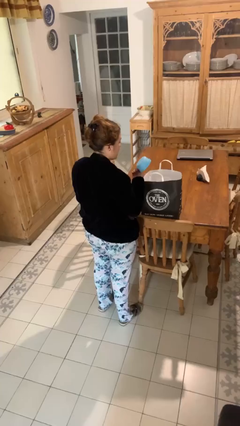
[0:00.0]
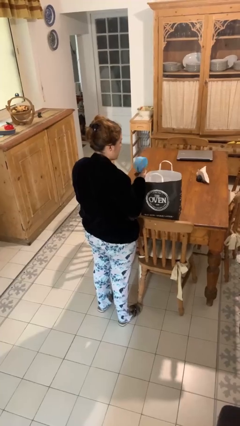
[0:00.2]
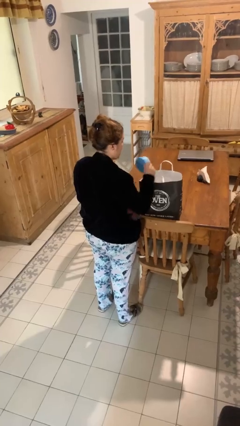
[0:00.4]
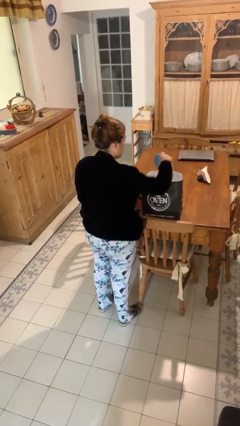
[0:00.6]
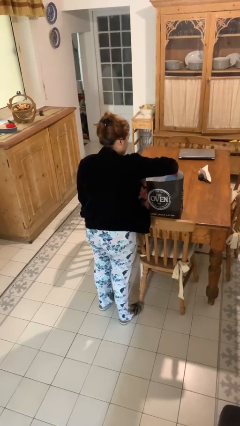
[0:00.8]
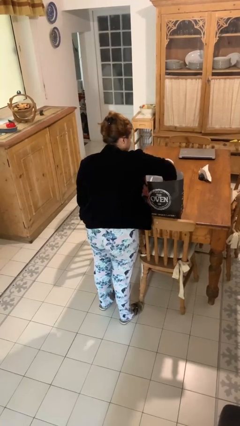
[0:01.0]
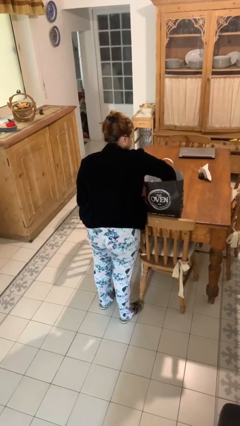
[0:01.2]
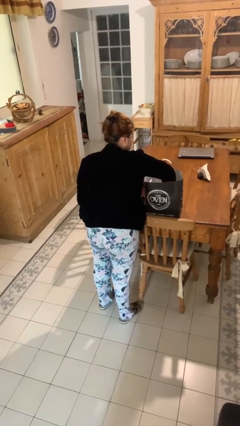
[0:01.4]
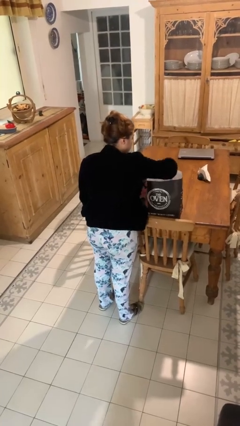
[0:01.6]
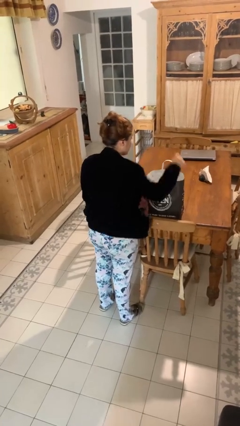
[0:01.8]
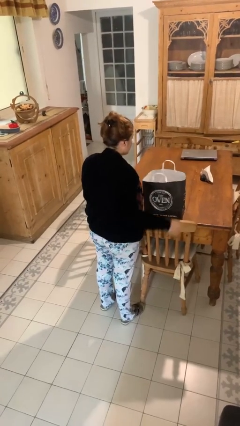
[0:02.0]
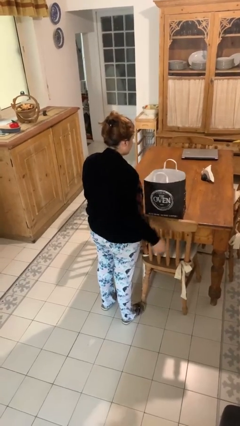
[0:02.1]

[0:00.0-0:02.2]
person puts object into bag

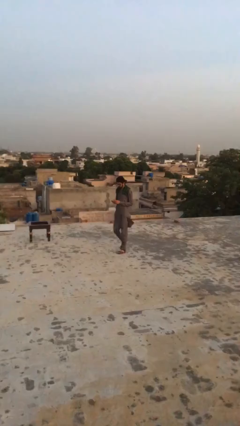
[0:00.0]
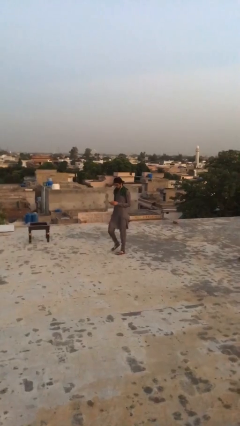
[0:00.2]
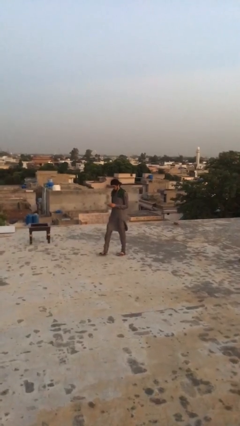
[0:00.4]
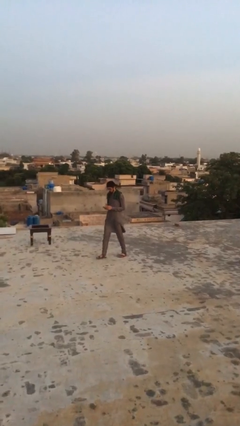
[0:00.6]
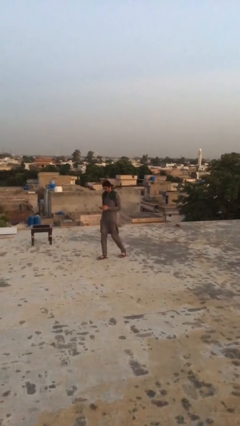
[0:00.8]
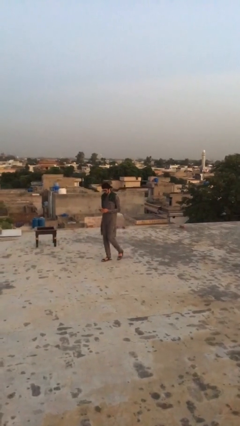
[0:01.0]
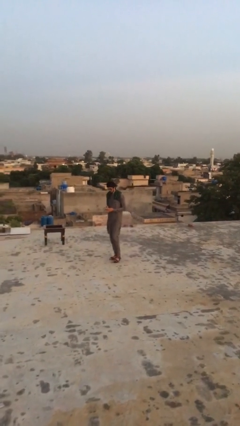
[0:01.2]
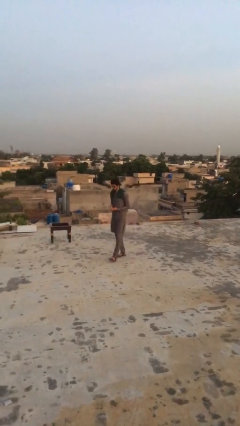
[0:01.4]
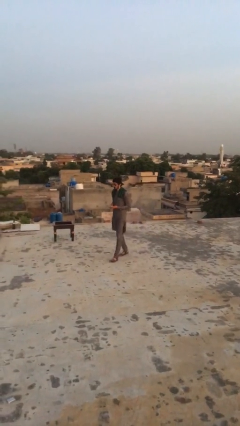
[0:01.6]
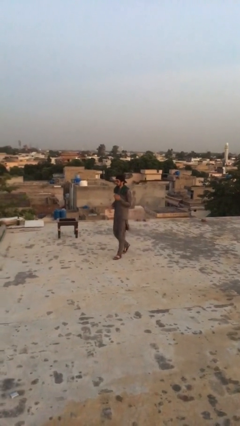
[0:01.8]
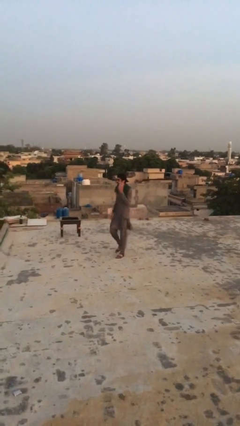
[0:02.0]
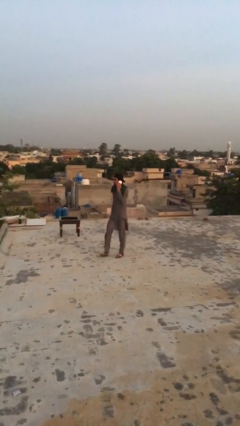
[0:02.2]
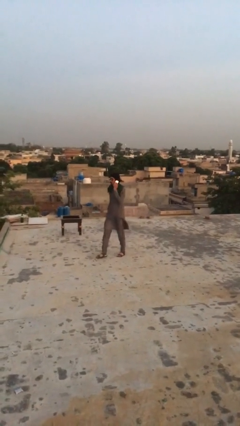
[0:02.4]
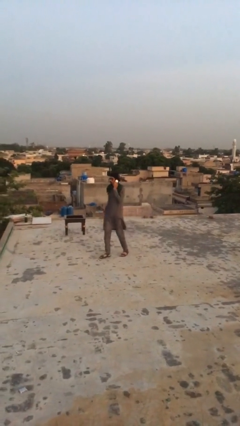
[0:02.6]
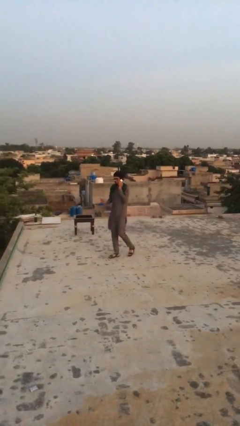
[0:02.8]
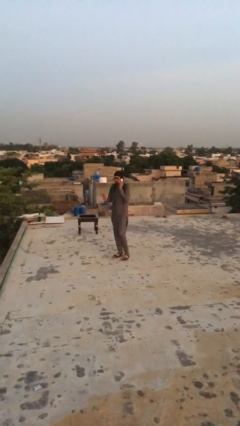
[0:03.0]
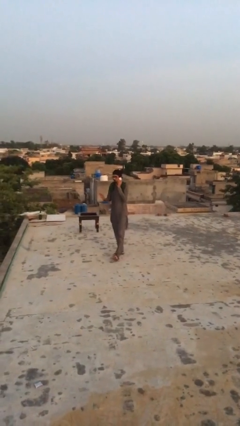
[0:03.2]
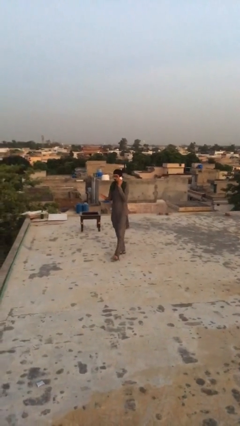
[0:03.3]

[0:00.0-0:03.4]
person talks on phone

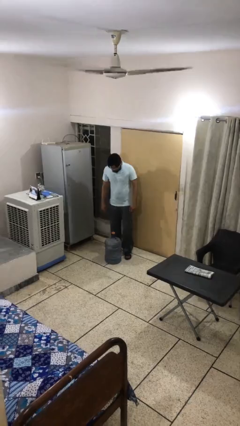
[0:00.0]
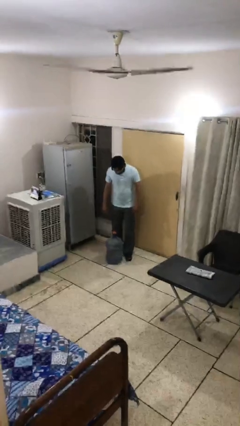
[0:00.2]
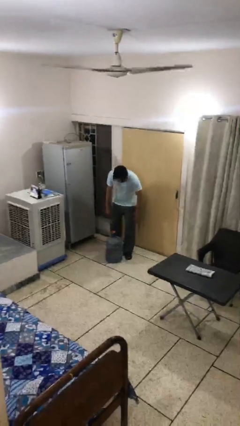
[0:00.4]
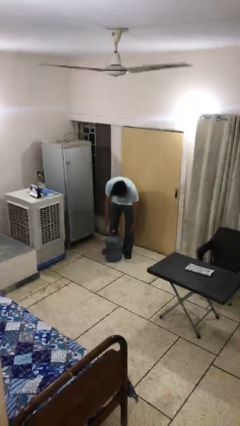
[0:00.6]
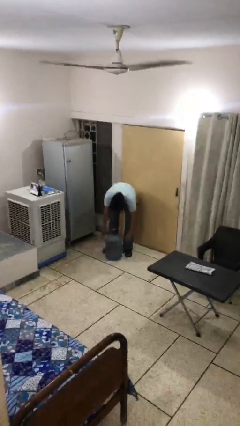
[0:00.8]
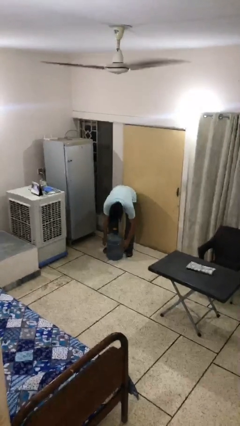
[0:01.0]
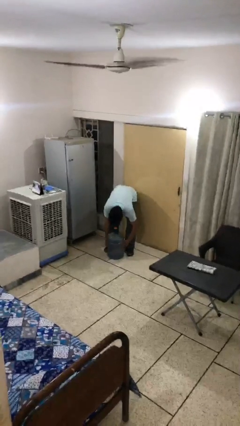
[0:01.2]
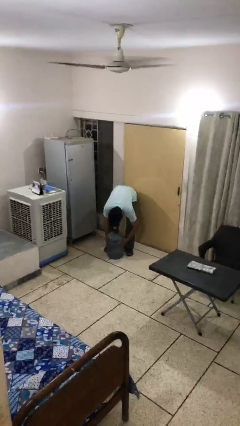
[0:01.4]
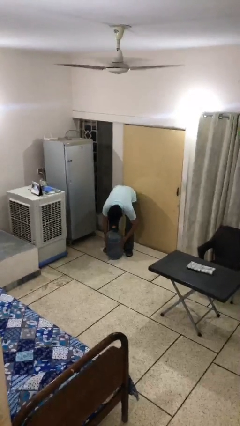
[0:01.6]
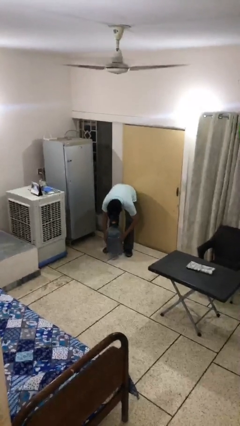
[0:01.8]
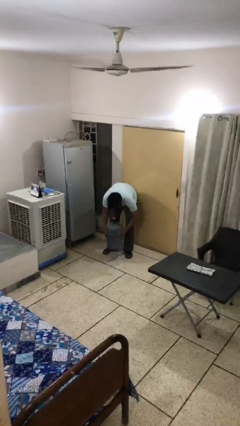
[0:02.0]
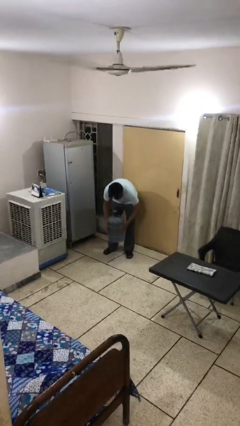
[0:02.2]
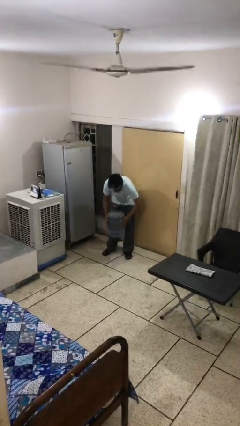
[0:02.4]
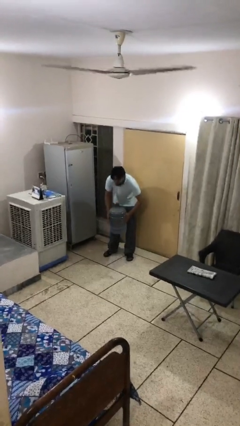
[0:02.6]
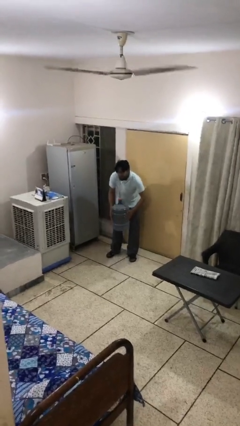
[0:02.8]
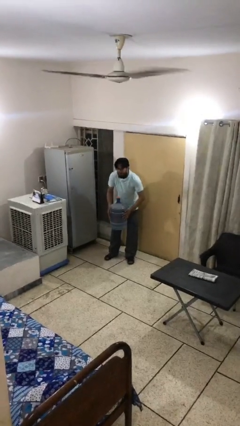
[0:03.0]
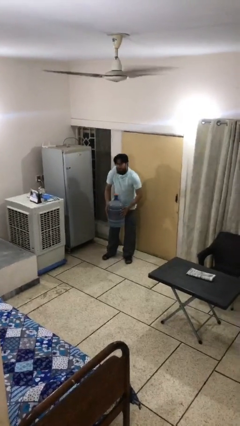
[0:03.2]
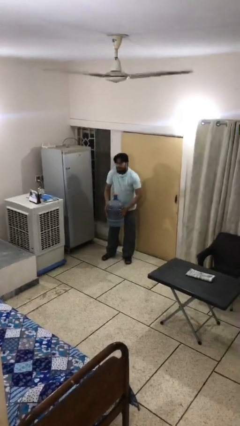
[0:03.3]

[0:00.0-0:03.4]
person picks up object from floor

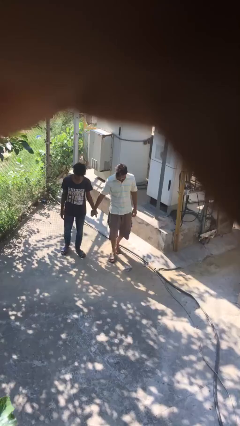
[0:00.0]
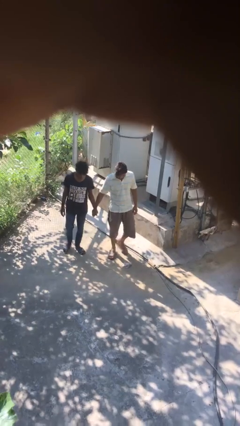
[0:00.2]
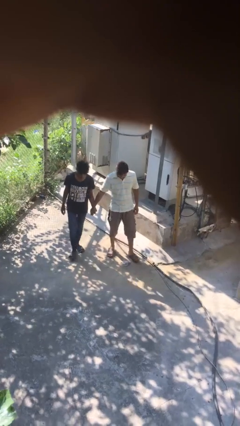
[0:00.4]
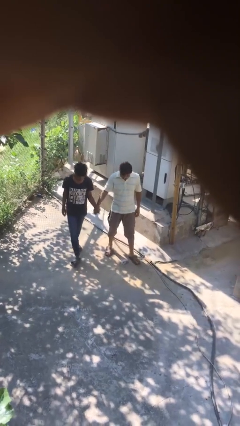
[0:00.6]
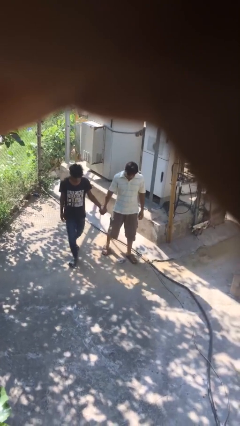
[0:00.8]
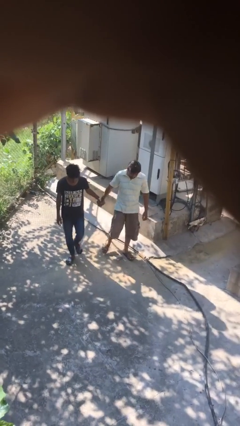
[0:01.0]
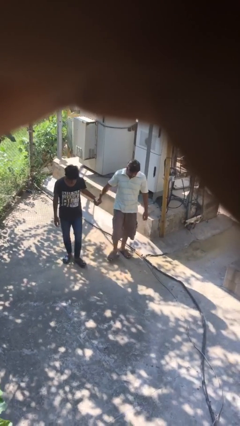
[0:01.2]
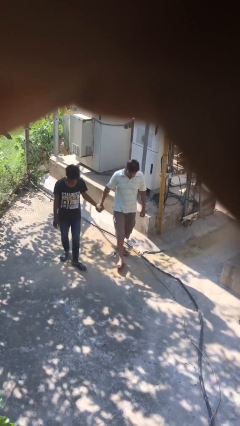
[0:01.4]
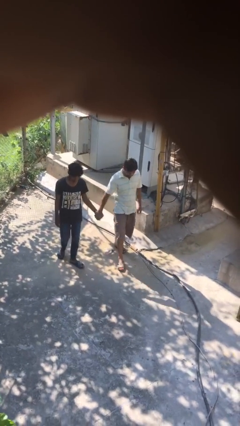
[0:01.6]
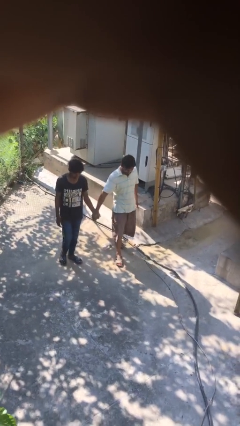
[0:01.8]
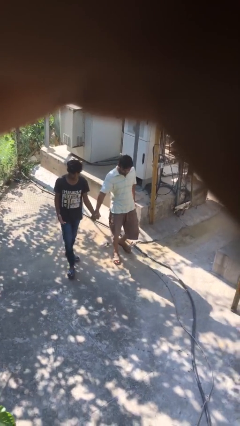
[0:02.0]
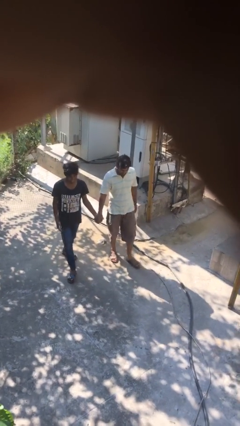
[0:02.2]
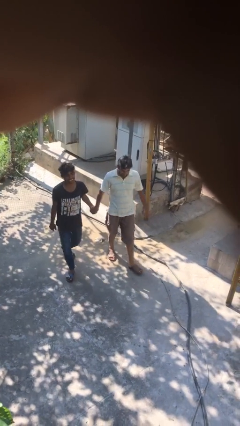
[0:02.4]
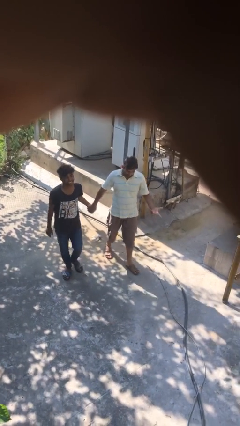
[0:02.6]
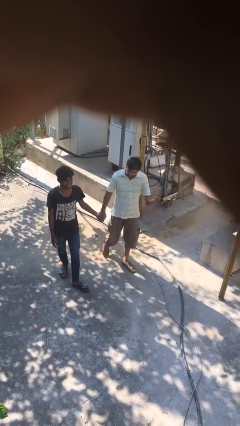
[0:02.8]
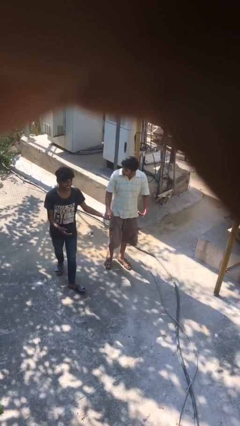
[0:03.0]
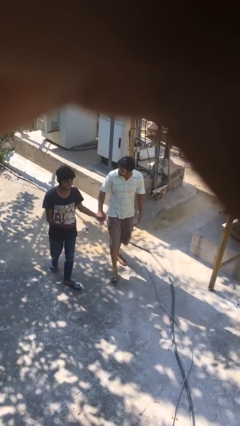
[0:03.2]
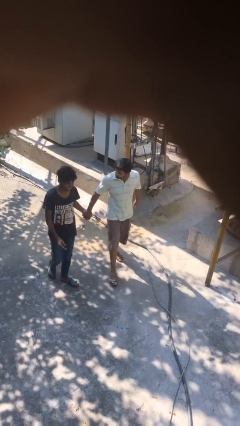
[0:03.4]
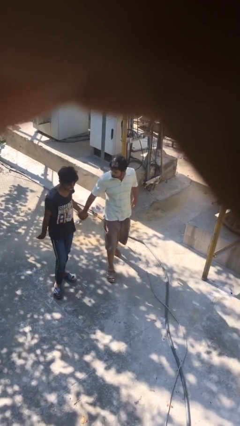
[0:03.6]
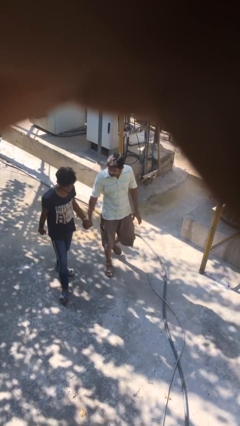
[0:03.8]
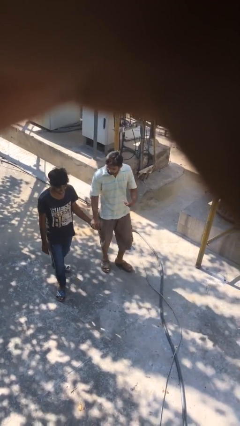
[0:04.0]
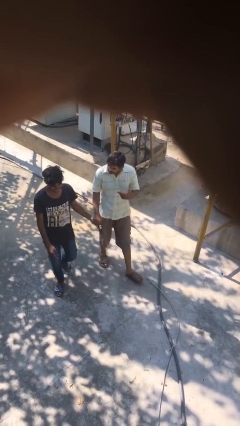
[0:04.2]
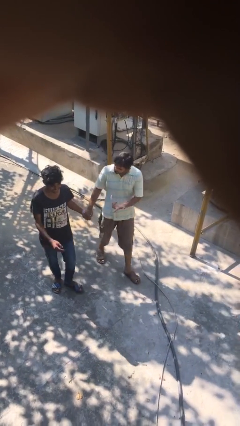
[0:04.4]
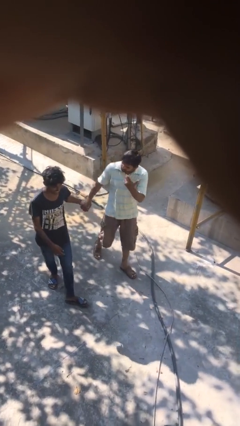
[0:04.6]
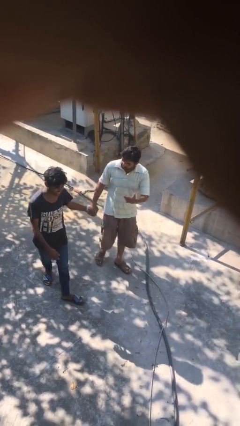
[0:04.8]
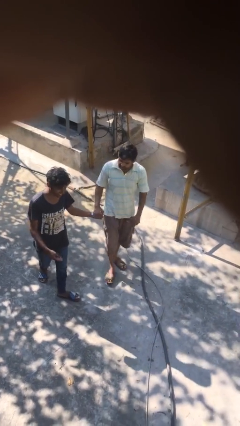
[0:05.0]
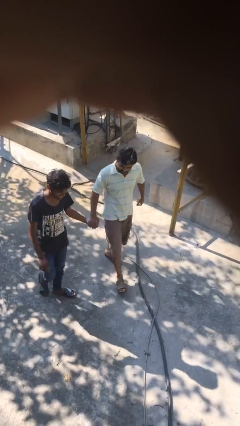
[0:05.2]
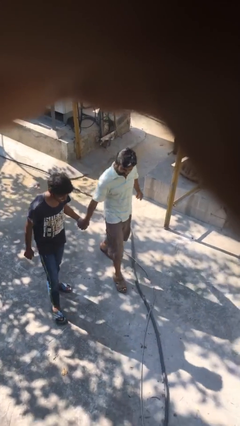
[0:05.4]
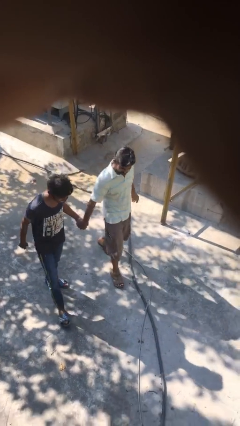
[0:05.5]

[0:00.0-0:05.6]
person holds hand

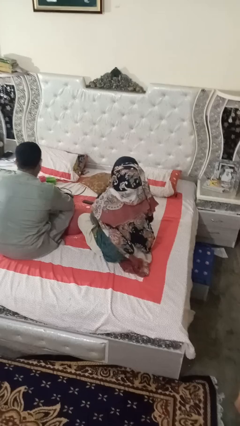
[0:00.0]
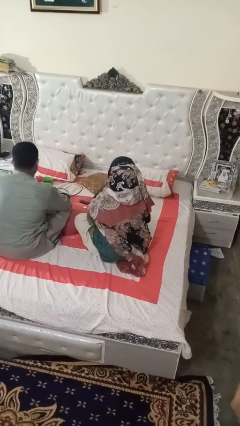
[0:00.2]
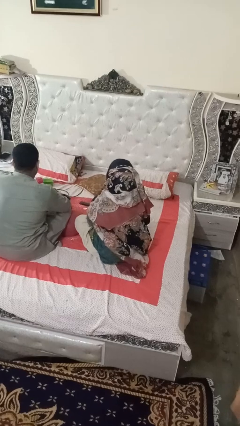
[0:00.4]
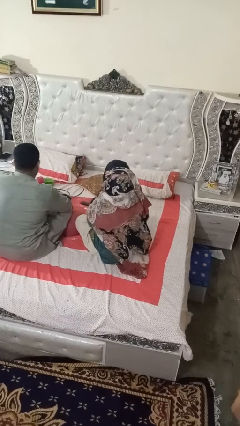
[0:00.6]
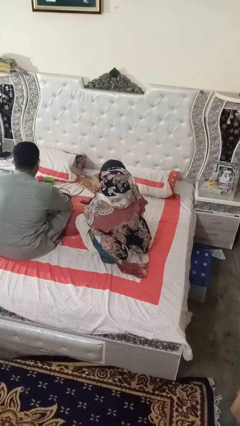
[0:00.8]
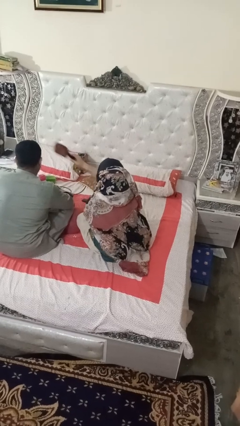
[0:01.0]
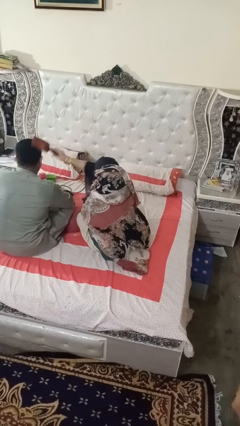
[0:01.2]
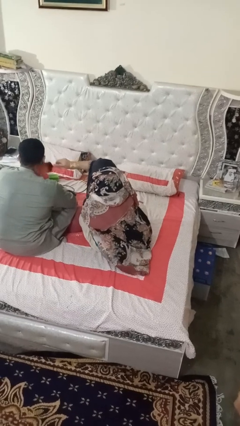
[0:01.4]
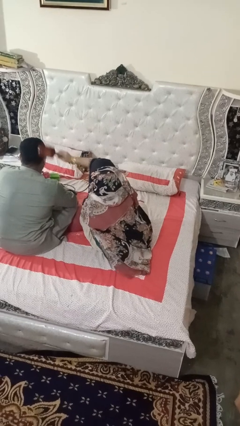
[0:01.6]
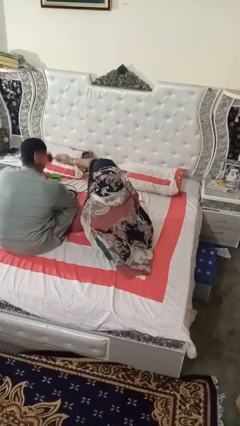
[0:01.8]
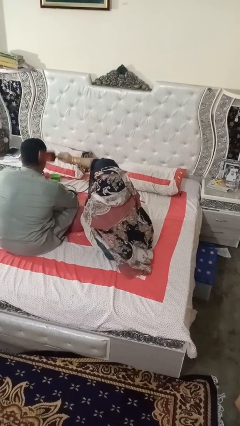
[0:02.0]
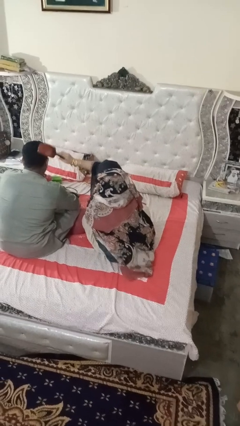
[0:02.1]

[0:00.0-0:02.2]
person brushes hair of person

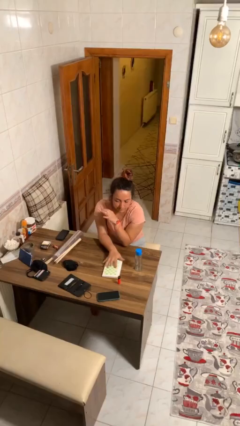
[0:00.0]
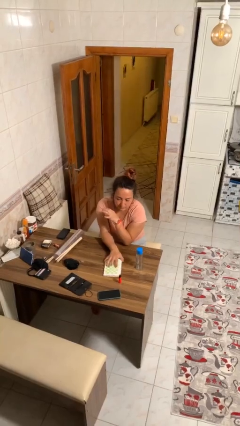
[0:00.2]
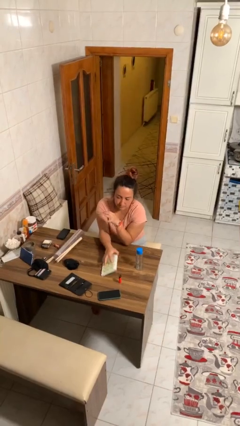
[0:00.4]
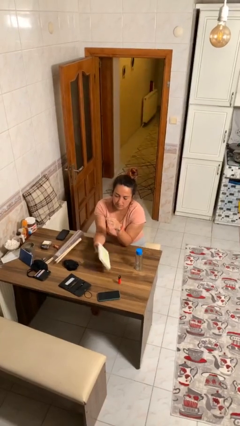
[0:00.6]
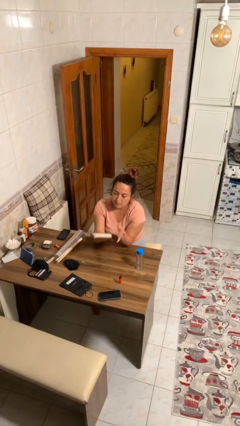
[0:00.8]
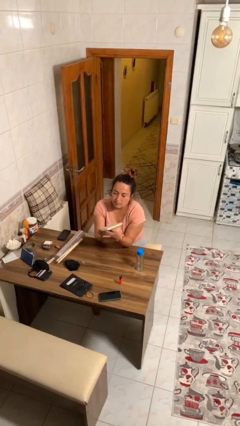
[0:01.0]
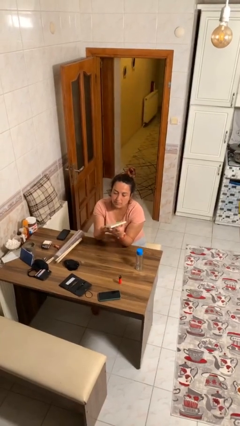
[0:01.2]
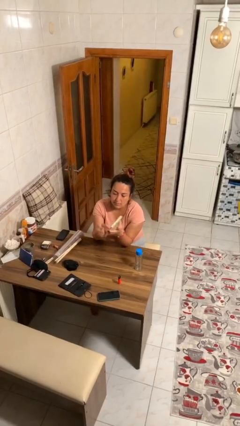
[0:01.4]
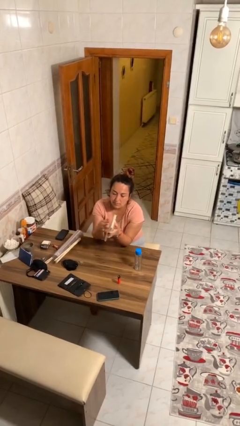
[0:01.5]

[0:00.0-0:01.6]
person picks up object from table
